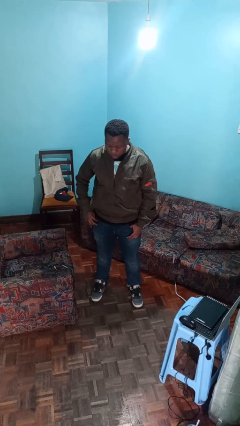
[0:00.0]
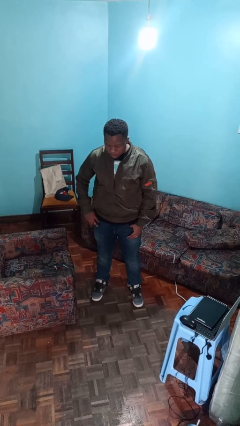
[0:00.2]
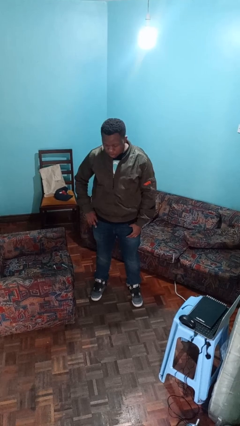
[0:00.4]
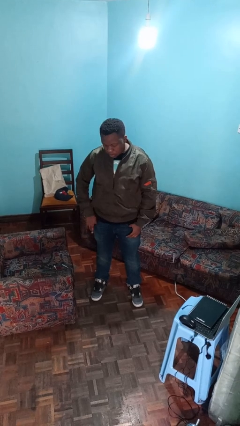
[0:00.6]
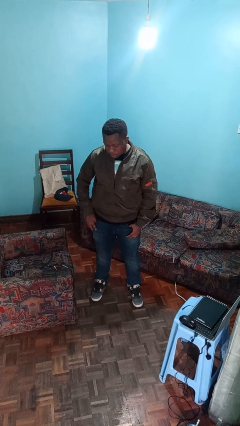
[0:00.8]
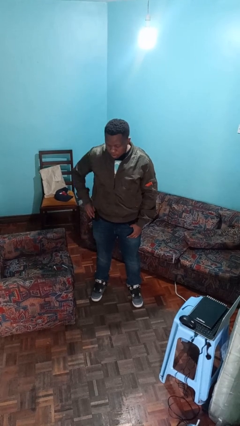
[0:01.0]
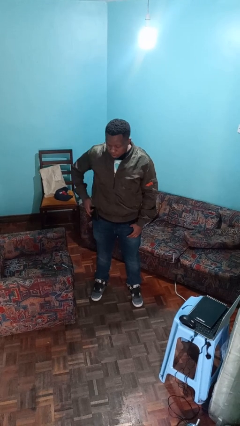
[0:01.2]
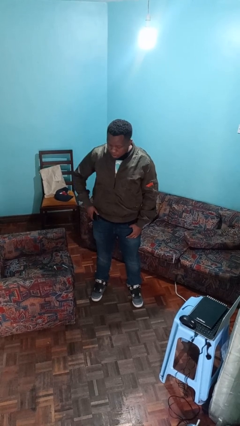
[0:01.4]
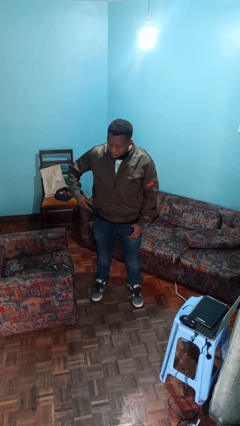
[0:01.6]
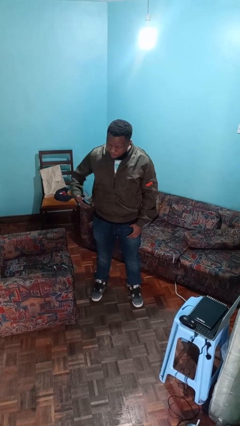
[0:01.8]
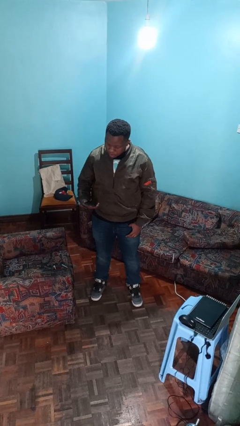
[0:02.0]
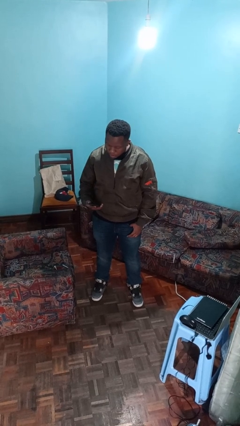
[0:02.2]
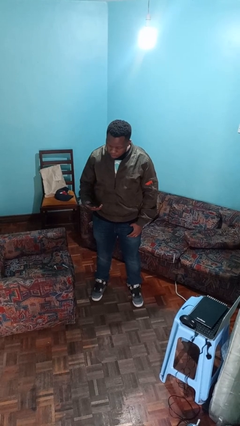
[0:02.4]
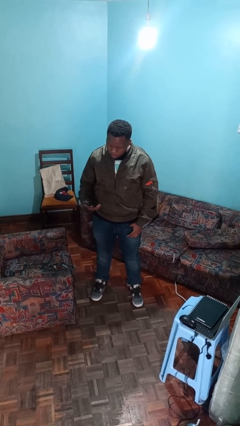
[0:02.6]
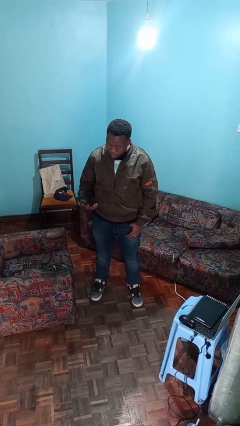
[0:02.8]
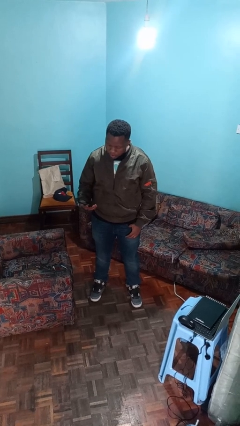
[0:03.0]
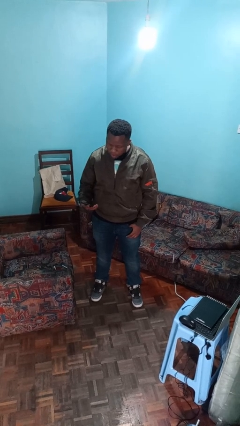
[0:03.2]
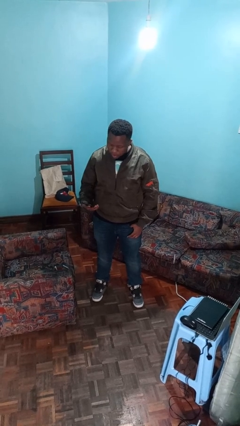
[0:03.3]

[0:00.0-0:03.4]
person takes phone from pocket

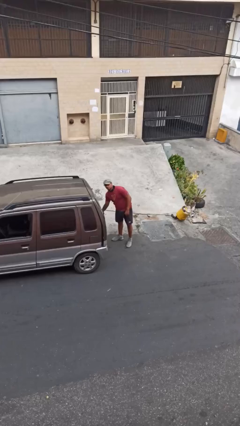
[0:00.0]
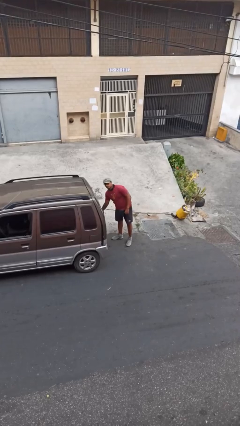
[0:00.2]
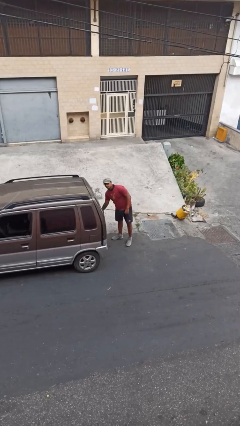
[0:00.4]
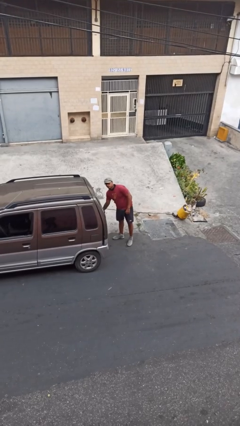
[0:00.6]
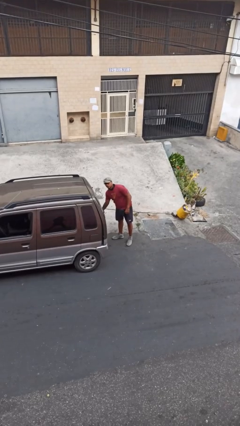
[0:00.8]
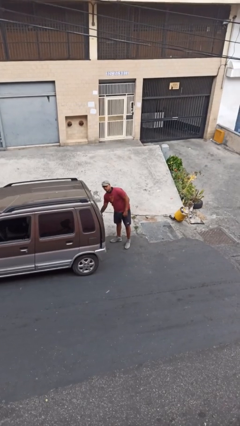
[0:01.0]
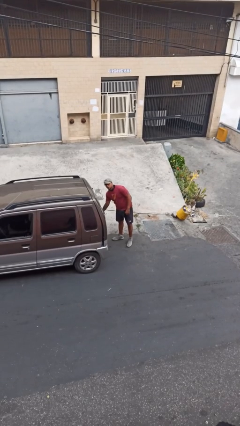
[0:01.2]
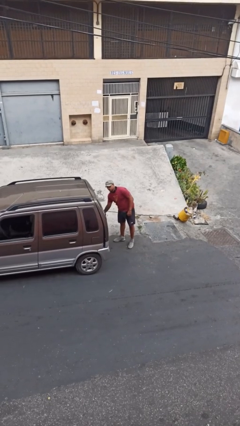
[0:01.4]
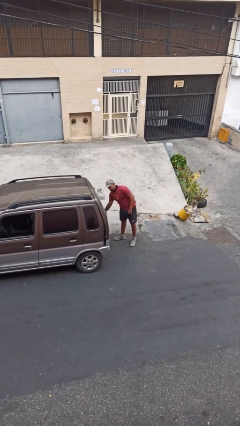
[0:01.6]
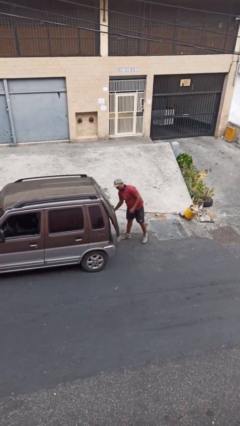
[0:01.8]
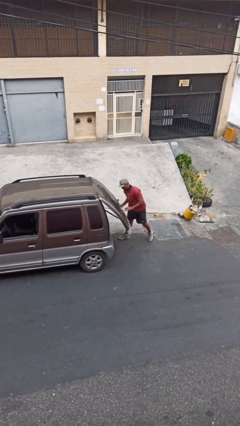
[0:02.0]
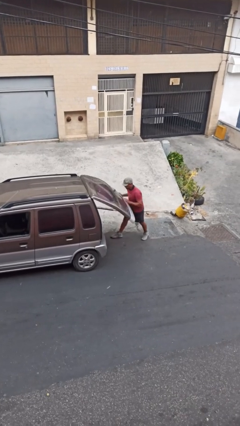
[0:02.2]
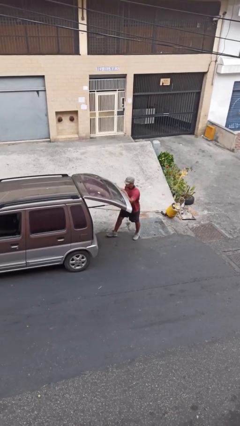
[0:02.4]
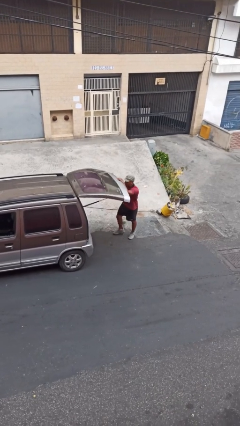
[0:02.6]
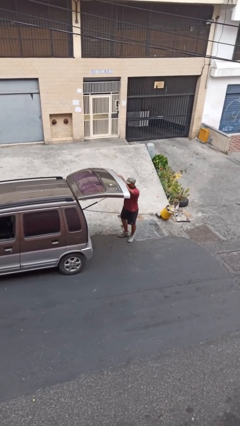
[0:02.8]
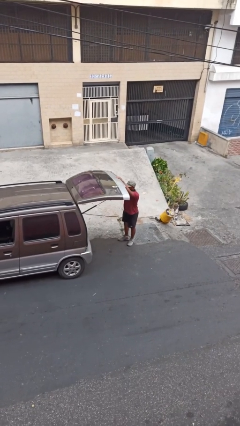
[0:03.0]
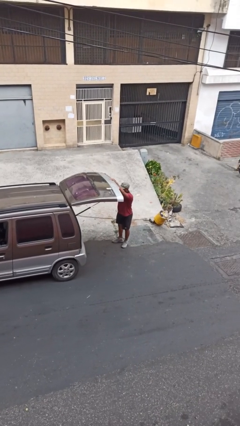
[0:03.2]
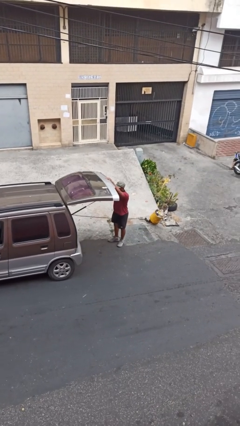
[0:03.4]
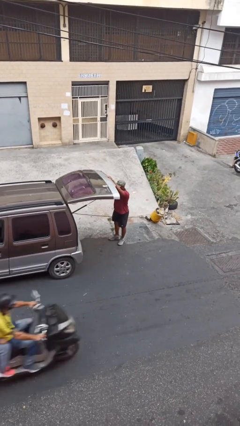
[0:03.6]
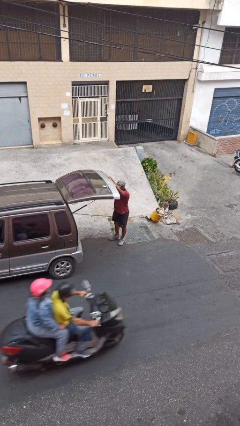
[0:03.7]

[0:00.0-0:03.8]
person opens car trunk

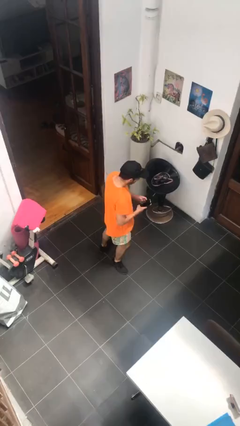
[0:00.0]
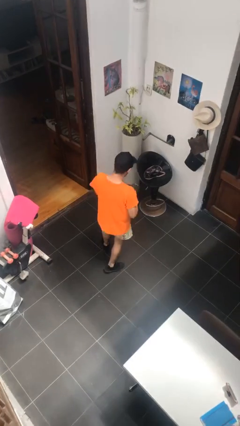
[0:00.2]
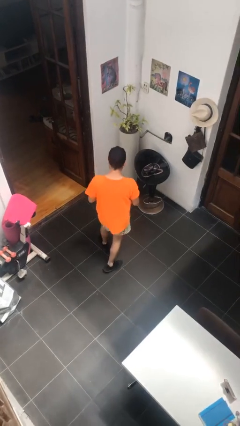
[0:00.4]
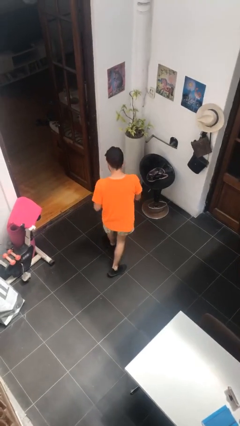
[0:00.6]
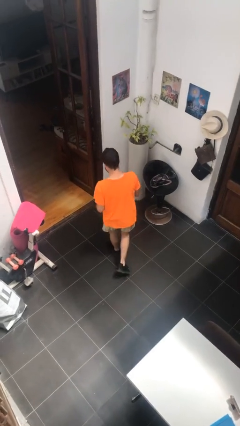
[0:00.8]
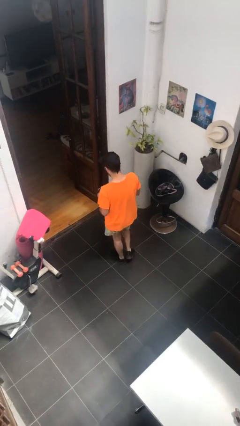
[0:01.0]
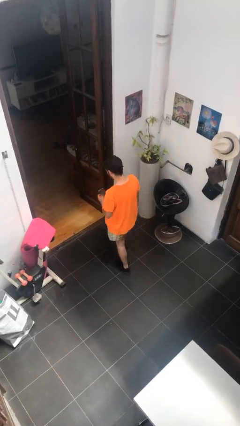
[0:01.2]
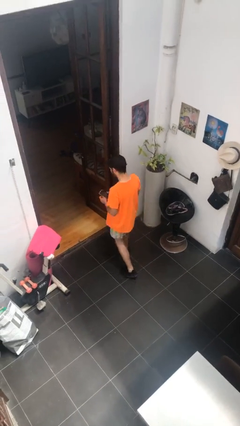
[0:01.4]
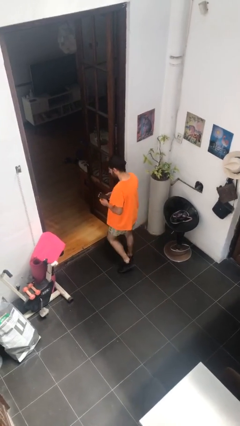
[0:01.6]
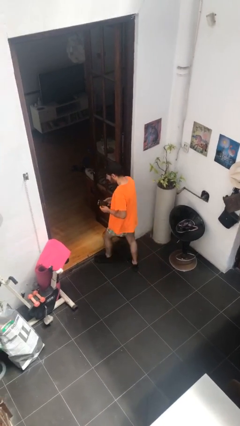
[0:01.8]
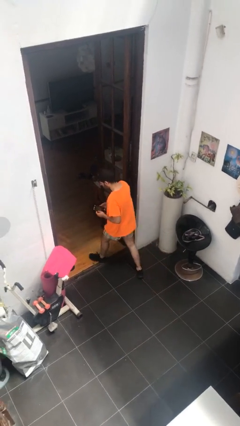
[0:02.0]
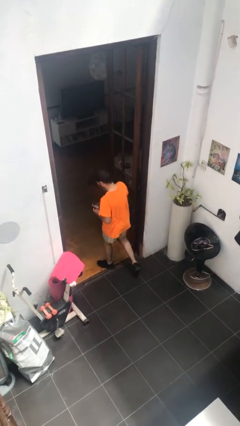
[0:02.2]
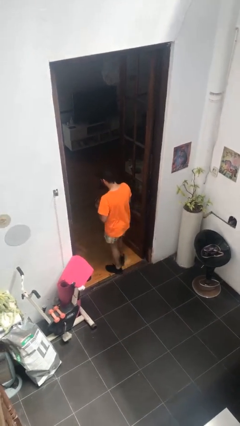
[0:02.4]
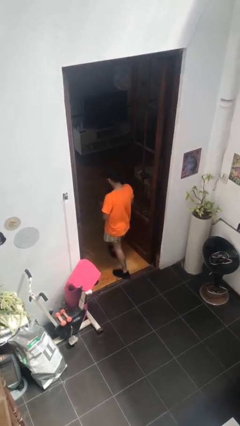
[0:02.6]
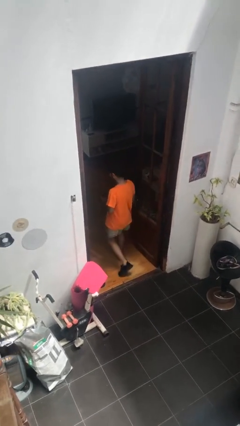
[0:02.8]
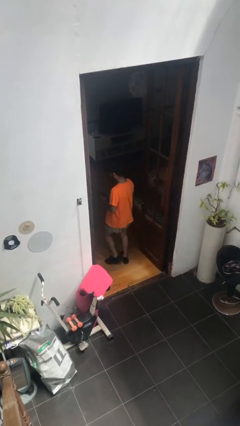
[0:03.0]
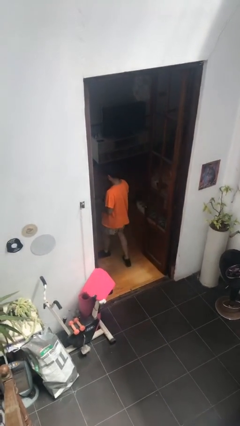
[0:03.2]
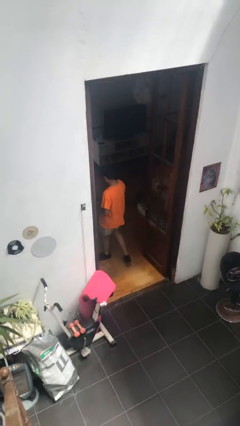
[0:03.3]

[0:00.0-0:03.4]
person exits scene through structure

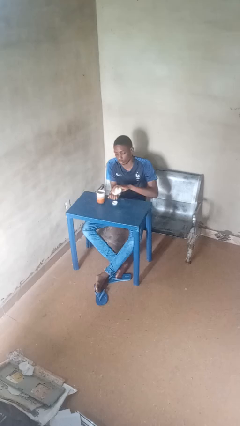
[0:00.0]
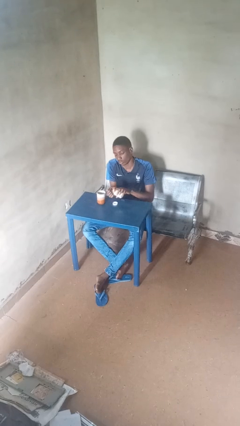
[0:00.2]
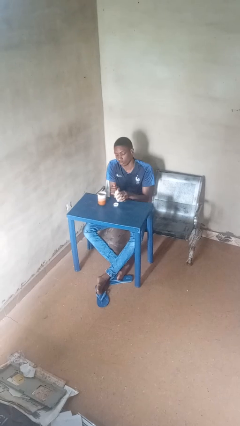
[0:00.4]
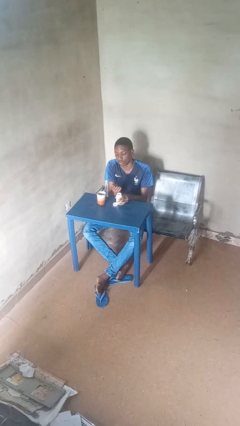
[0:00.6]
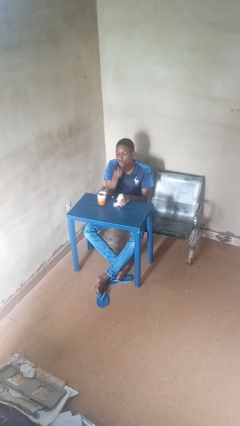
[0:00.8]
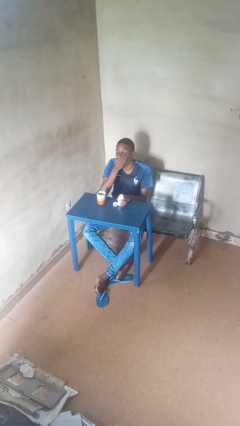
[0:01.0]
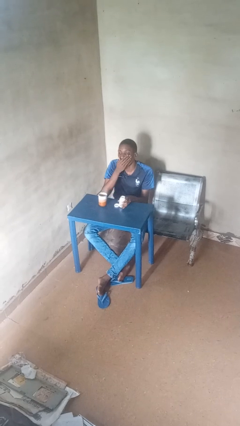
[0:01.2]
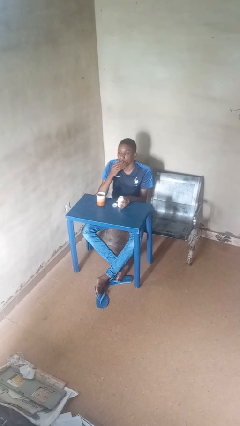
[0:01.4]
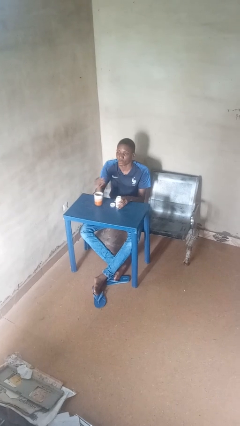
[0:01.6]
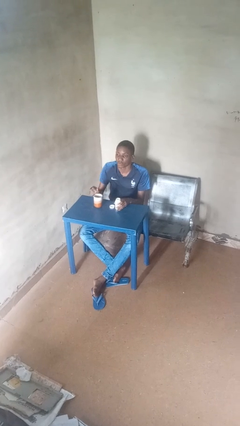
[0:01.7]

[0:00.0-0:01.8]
person takes medicine pills

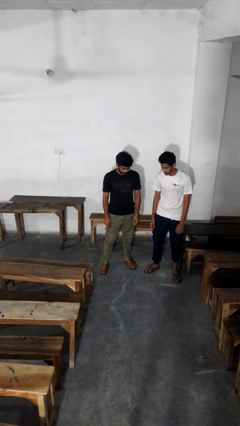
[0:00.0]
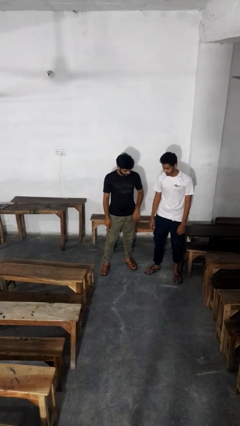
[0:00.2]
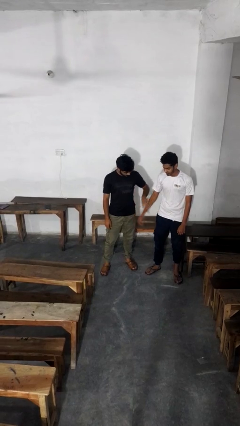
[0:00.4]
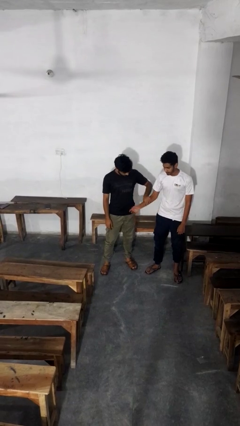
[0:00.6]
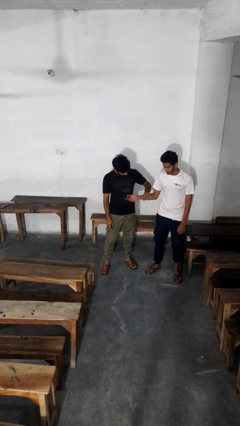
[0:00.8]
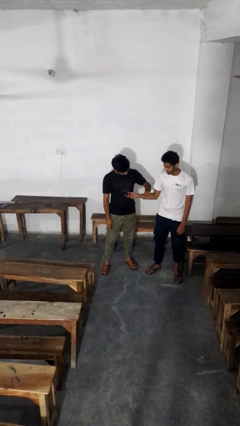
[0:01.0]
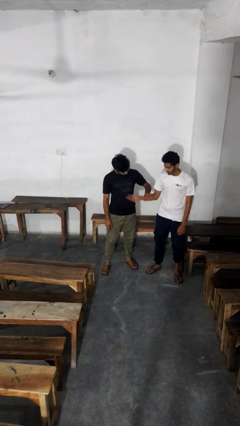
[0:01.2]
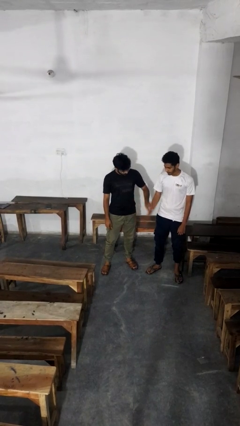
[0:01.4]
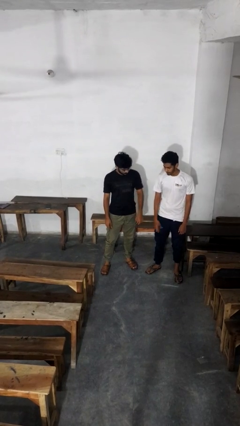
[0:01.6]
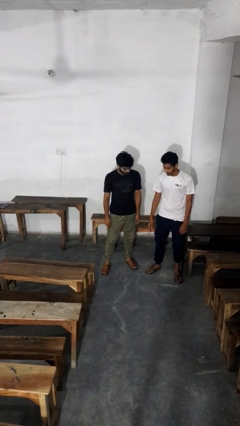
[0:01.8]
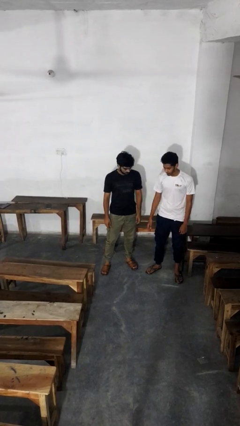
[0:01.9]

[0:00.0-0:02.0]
person grabs person by forearm

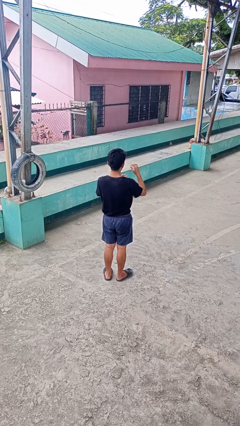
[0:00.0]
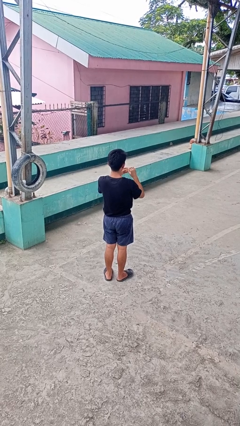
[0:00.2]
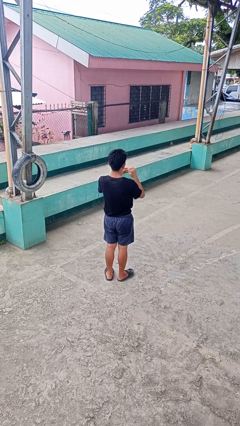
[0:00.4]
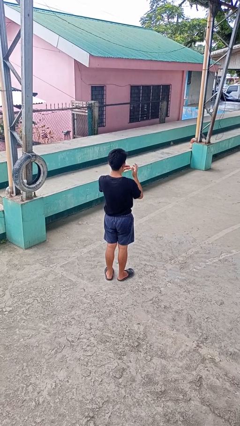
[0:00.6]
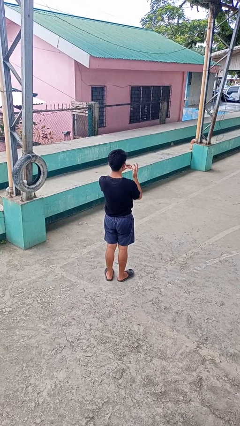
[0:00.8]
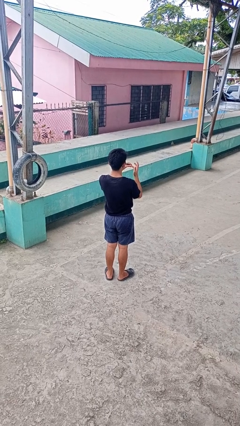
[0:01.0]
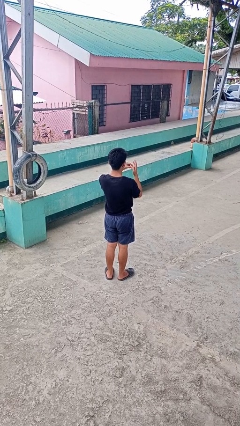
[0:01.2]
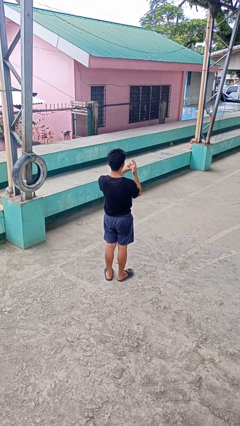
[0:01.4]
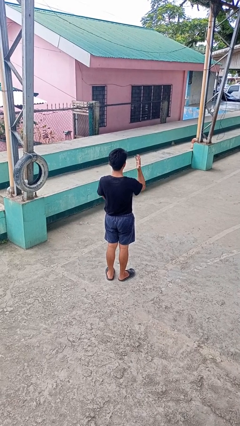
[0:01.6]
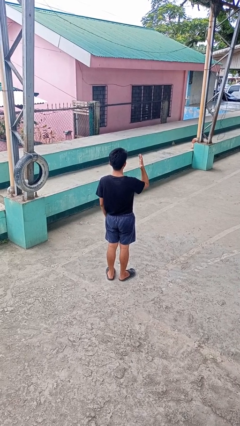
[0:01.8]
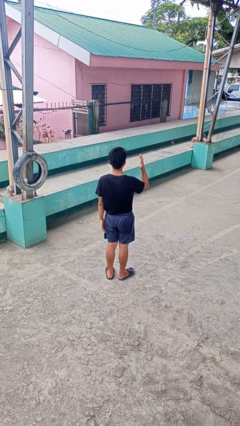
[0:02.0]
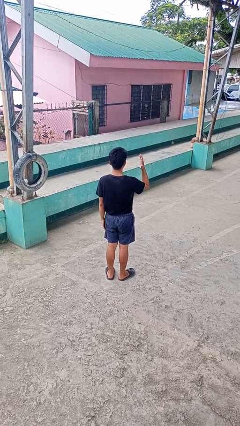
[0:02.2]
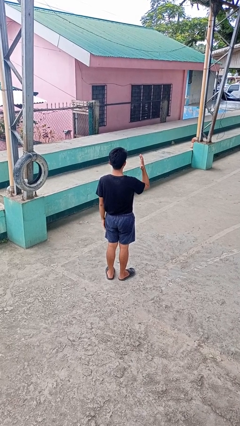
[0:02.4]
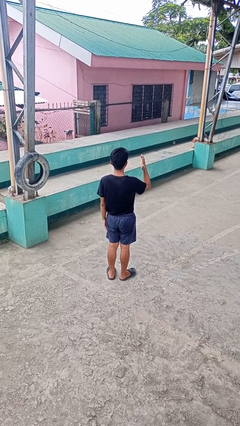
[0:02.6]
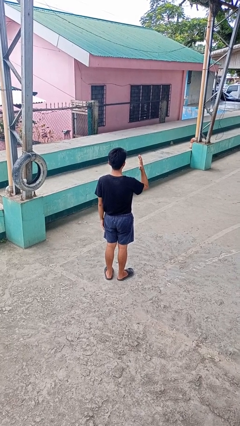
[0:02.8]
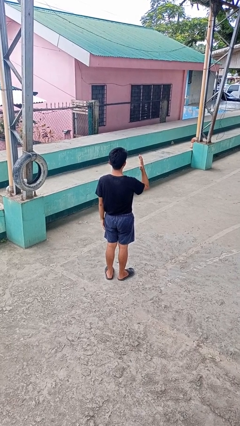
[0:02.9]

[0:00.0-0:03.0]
person puts on ring
